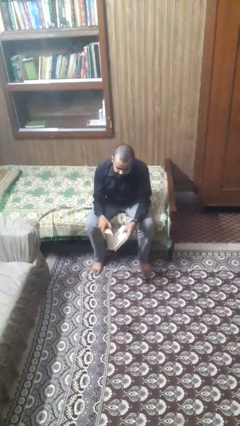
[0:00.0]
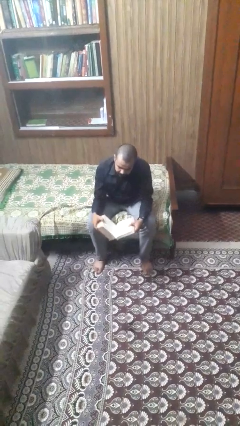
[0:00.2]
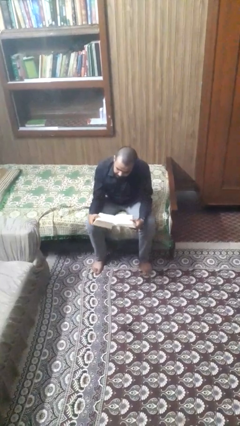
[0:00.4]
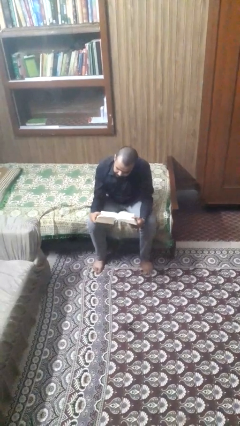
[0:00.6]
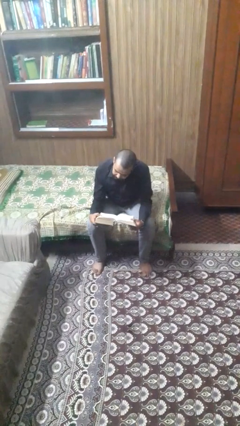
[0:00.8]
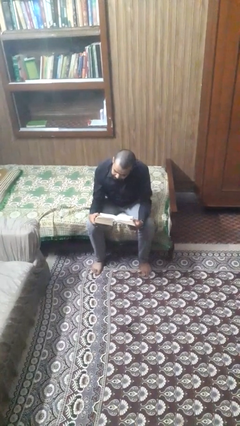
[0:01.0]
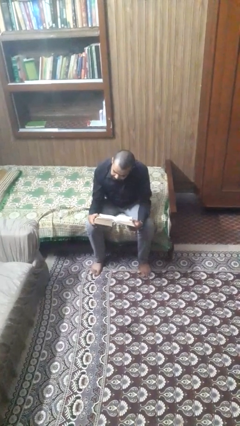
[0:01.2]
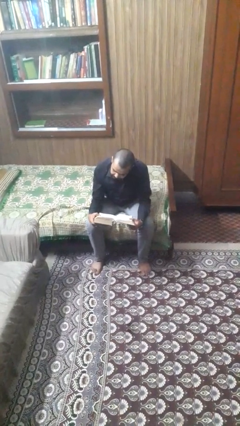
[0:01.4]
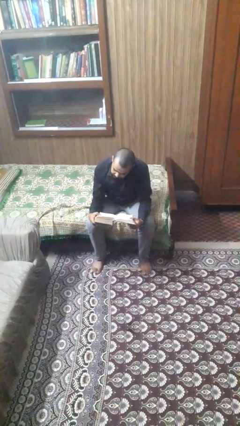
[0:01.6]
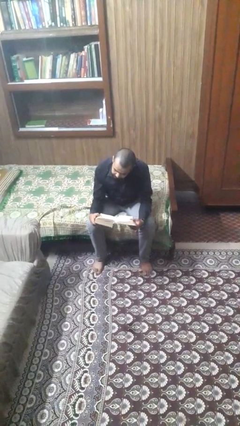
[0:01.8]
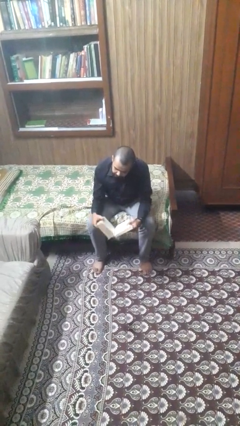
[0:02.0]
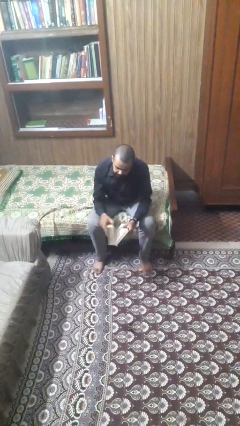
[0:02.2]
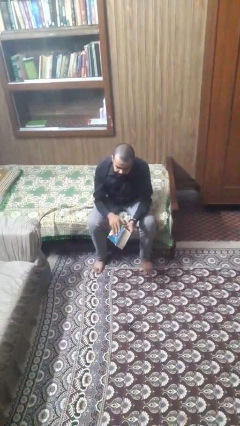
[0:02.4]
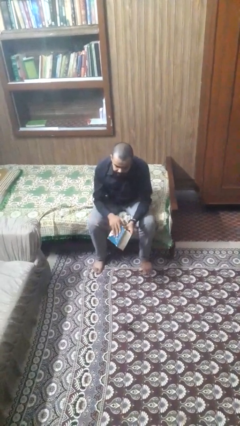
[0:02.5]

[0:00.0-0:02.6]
person reads book

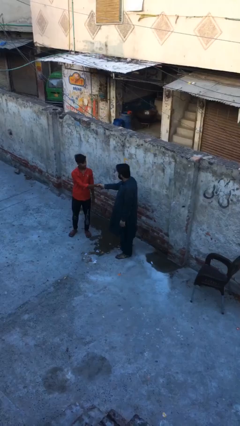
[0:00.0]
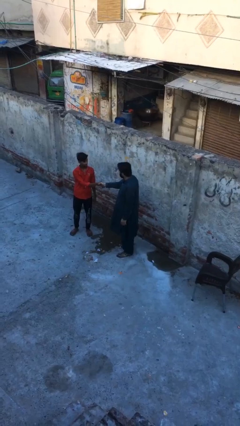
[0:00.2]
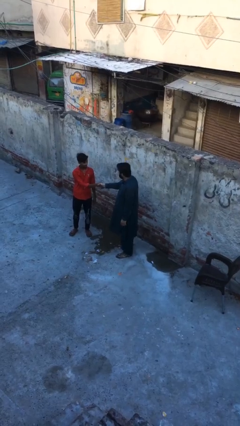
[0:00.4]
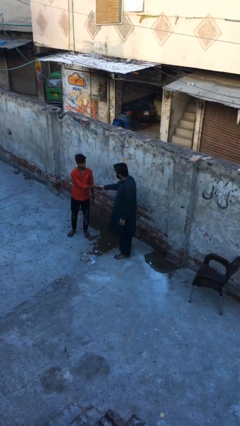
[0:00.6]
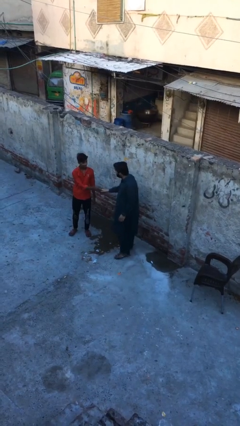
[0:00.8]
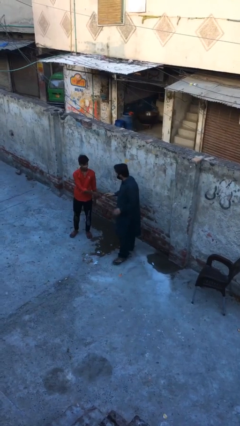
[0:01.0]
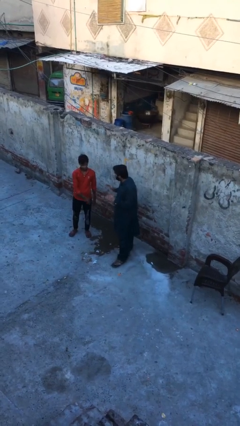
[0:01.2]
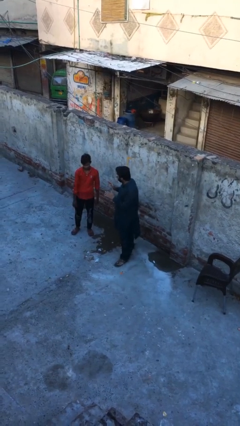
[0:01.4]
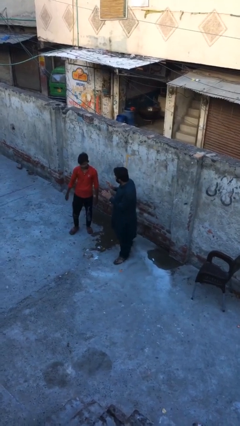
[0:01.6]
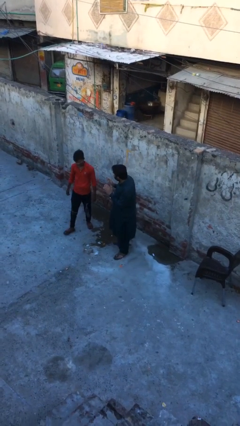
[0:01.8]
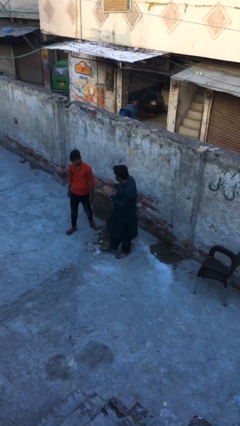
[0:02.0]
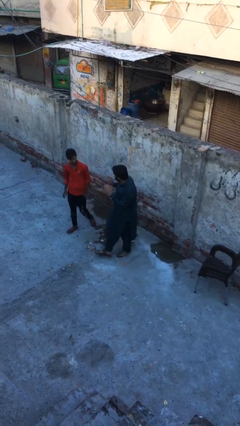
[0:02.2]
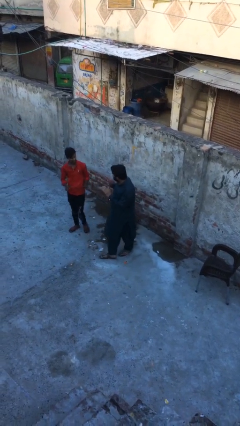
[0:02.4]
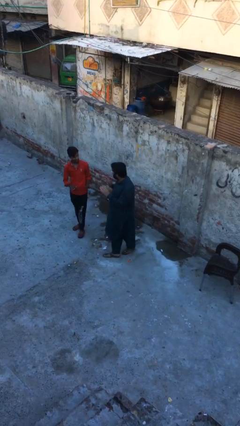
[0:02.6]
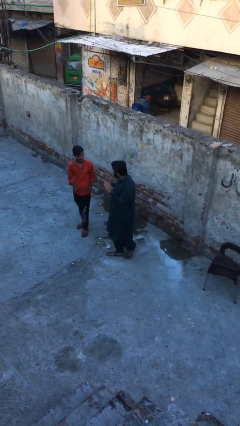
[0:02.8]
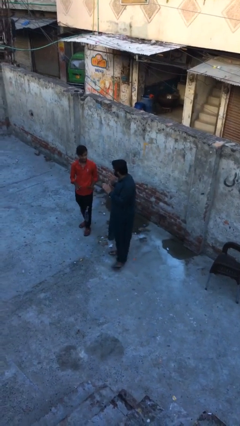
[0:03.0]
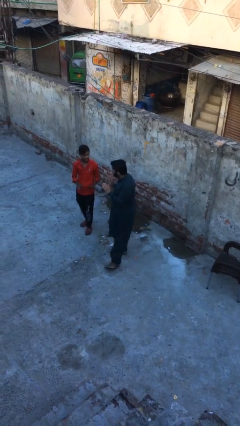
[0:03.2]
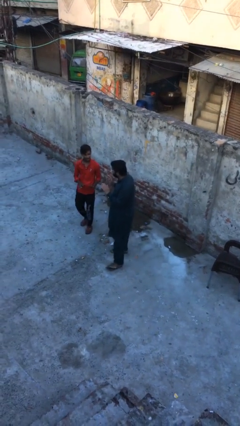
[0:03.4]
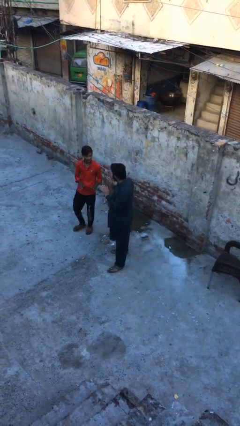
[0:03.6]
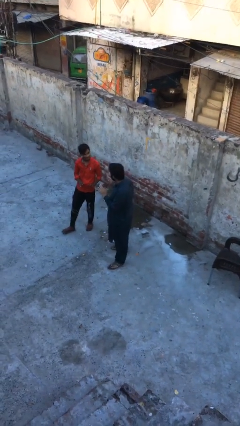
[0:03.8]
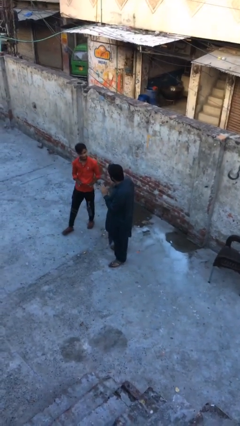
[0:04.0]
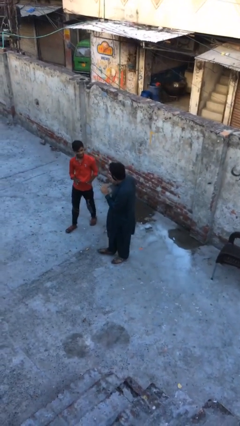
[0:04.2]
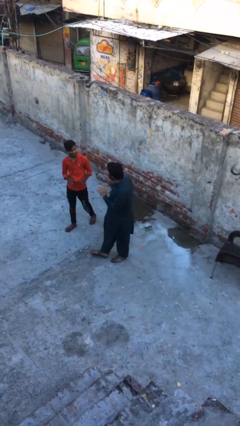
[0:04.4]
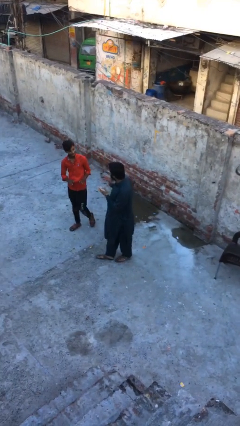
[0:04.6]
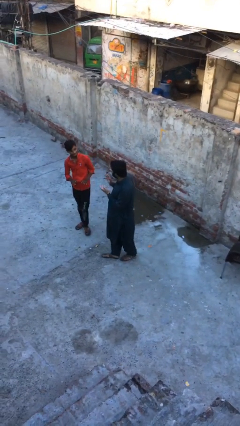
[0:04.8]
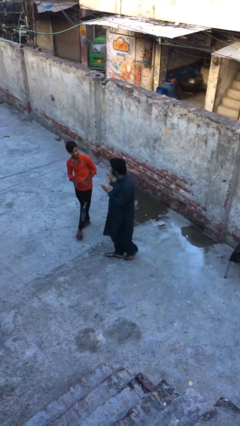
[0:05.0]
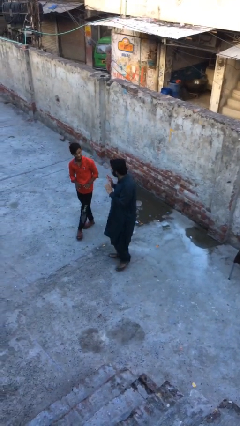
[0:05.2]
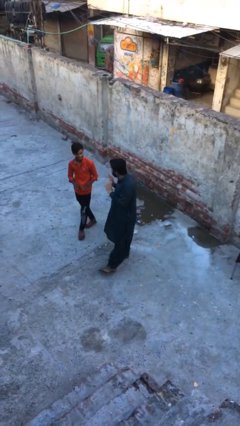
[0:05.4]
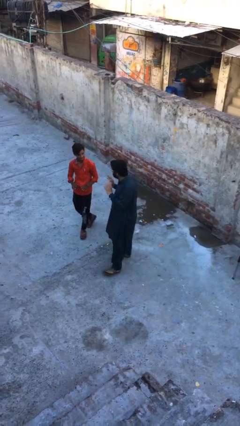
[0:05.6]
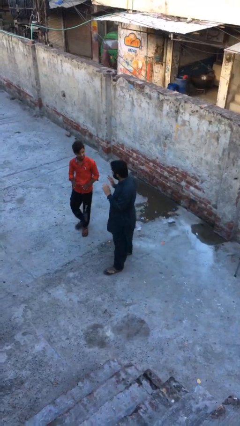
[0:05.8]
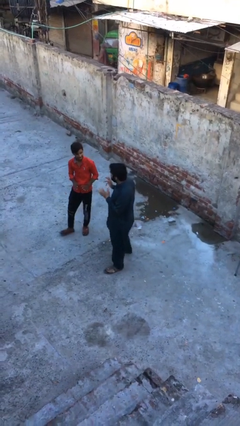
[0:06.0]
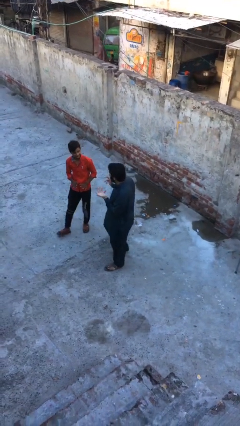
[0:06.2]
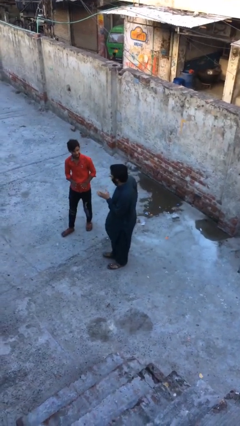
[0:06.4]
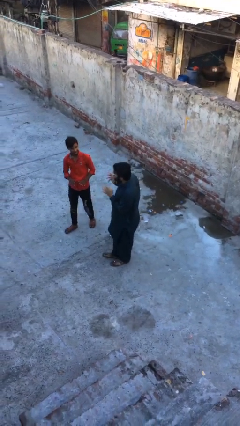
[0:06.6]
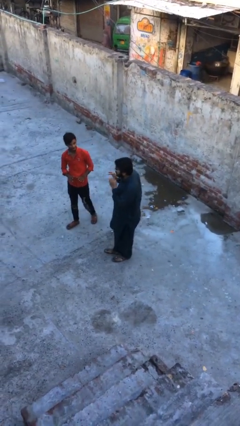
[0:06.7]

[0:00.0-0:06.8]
person talks to person

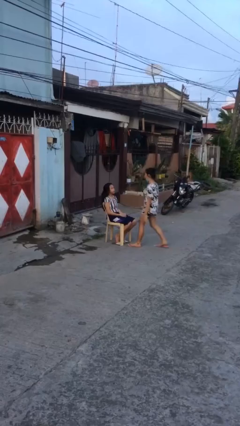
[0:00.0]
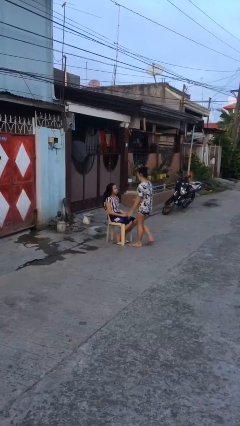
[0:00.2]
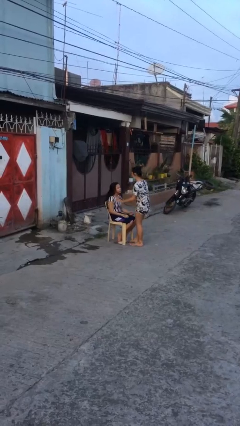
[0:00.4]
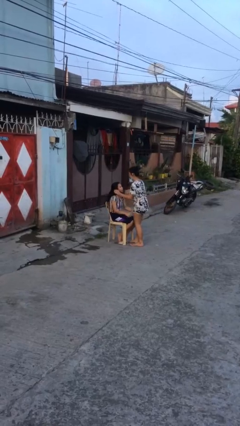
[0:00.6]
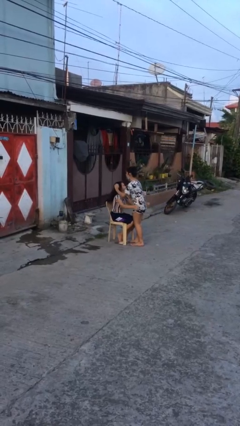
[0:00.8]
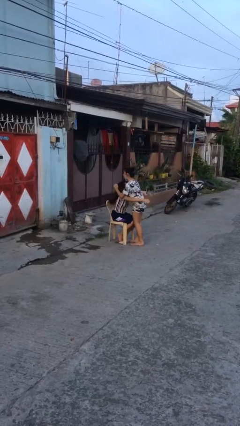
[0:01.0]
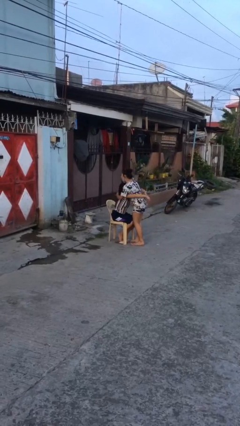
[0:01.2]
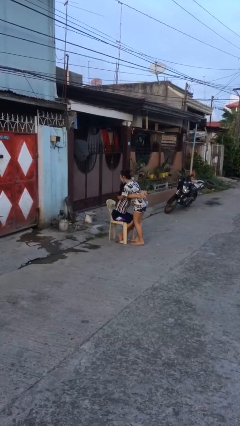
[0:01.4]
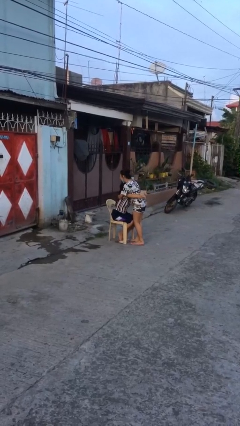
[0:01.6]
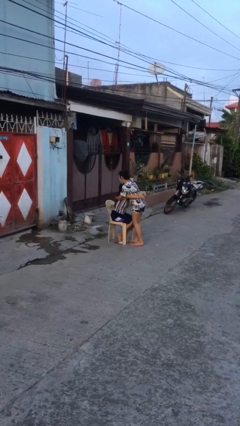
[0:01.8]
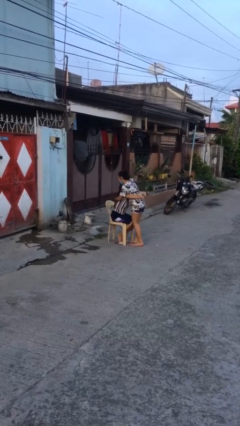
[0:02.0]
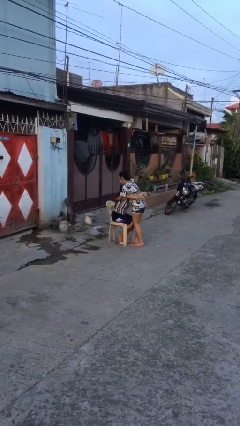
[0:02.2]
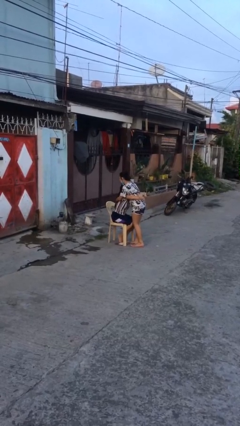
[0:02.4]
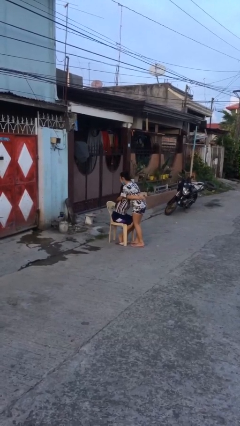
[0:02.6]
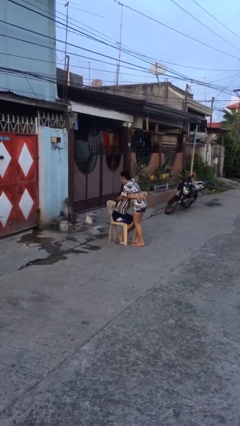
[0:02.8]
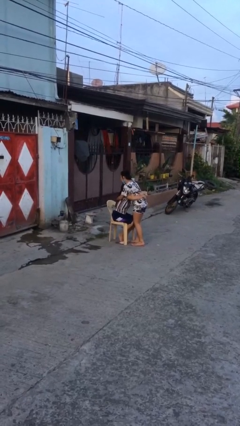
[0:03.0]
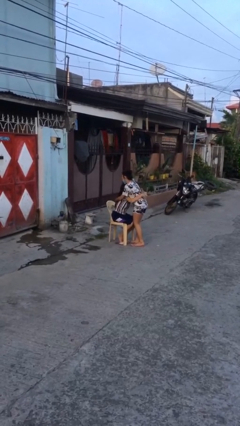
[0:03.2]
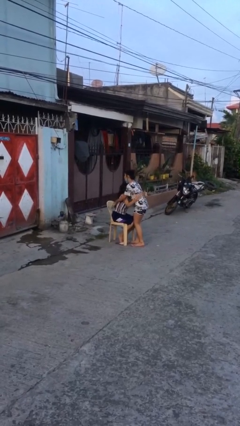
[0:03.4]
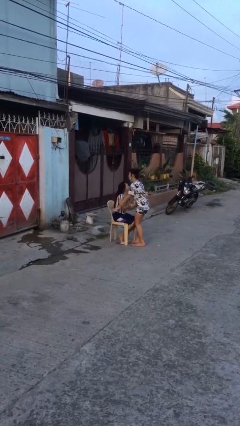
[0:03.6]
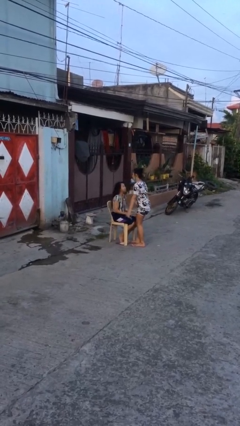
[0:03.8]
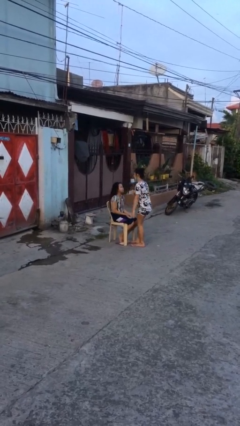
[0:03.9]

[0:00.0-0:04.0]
person embraces person

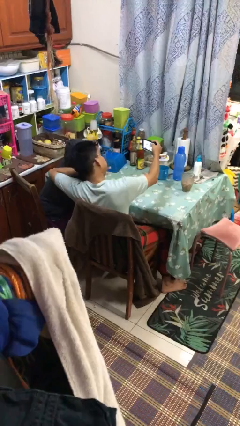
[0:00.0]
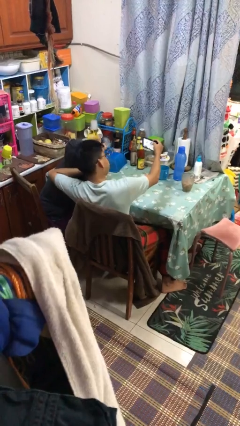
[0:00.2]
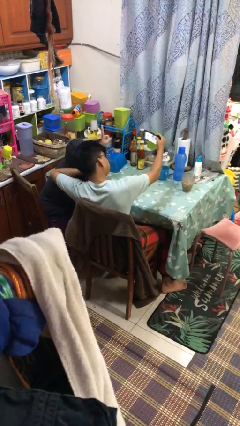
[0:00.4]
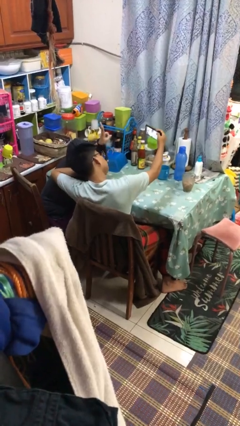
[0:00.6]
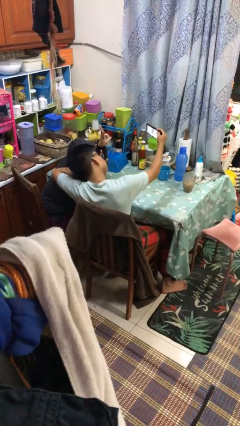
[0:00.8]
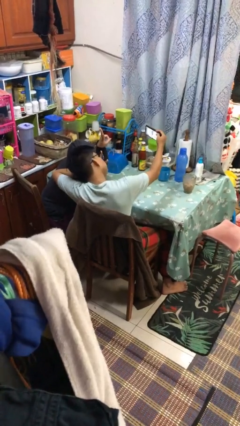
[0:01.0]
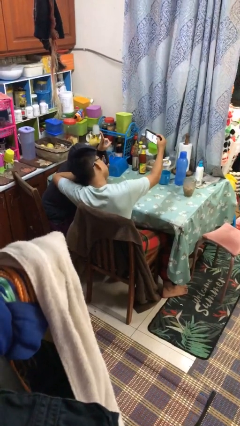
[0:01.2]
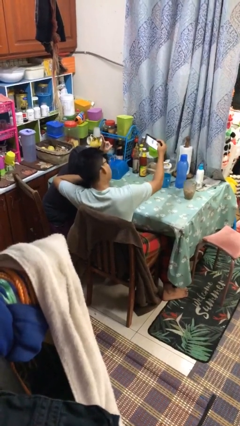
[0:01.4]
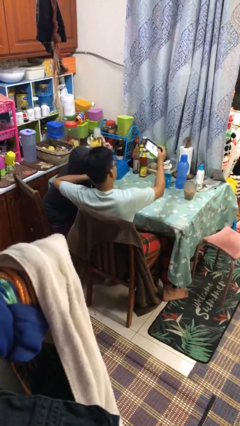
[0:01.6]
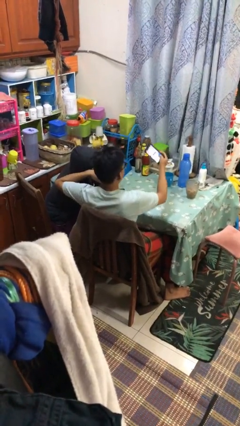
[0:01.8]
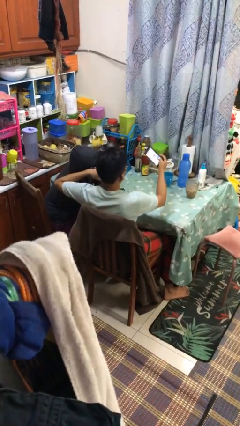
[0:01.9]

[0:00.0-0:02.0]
person takes selfie with person

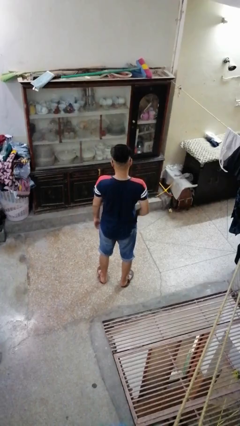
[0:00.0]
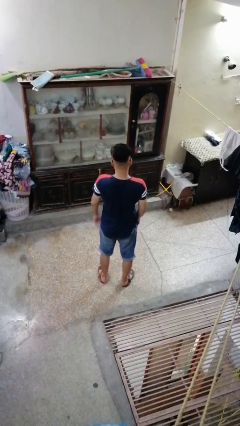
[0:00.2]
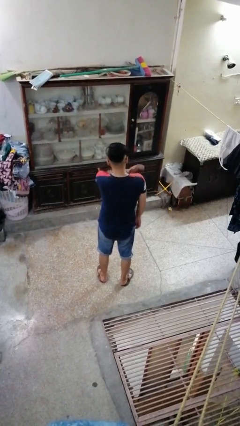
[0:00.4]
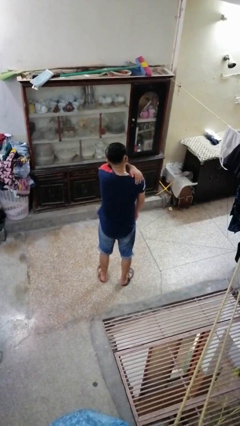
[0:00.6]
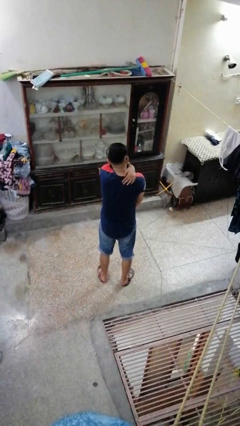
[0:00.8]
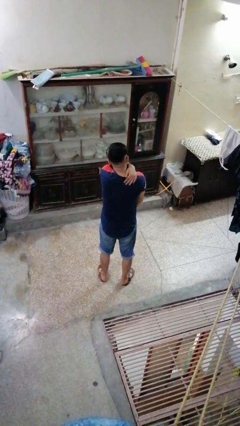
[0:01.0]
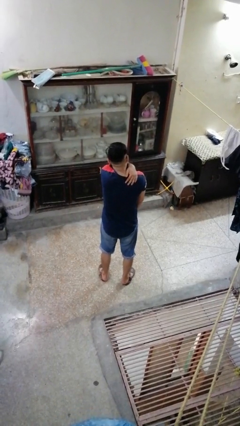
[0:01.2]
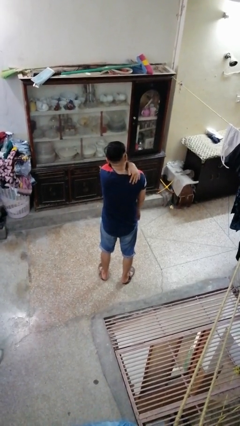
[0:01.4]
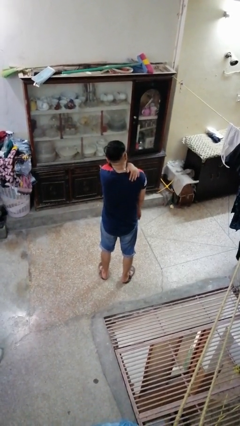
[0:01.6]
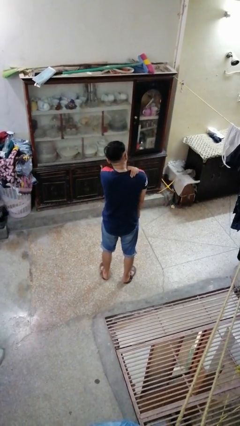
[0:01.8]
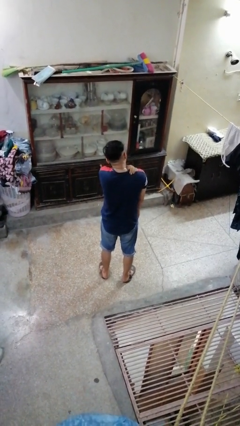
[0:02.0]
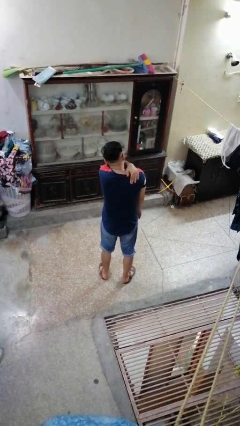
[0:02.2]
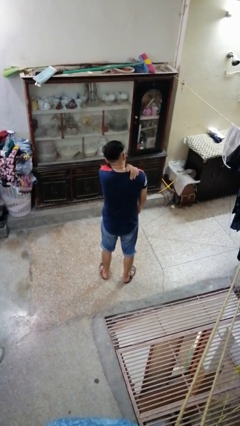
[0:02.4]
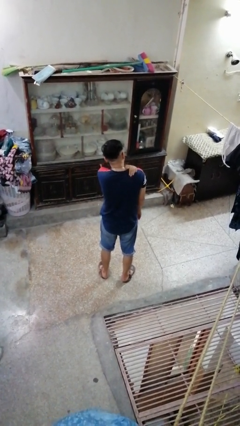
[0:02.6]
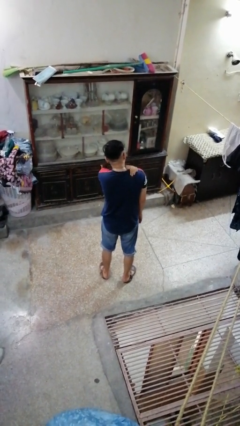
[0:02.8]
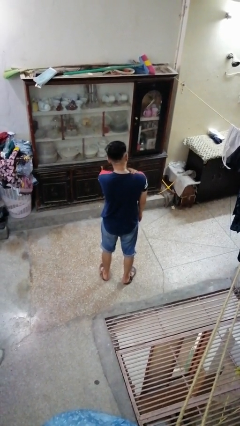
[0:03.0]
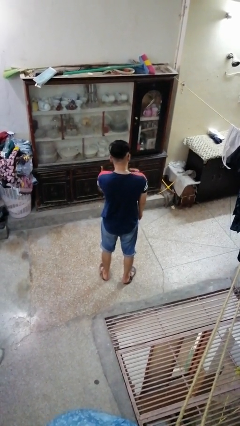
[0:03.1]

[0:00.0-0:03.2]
person swats bug
